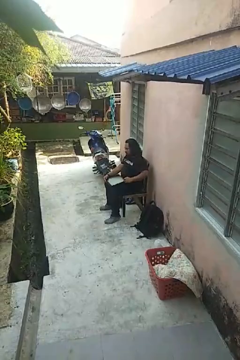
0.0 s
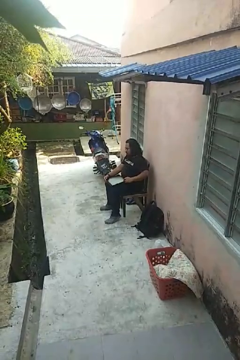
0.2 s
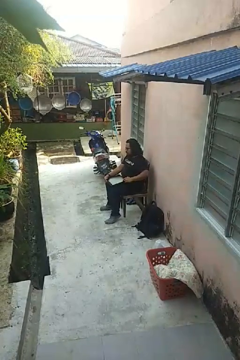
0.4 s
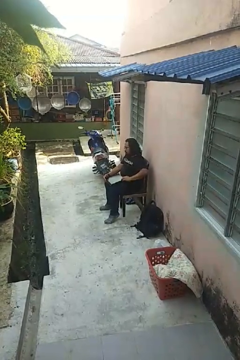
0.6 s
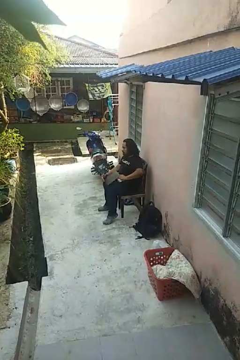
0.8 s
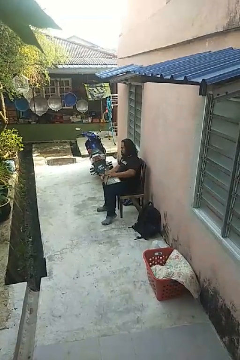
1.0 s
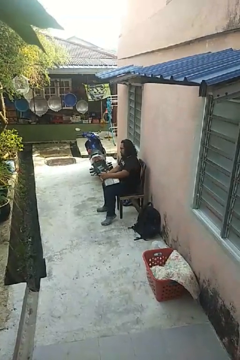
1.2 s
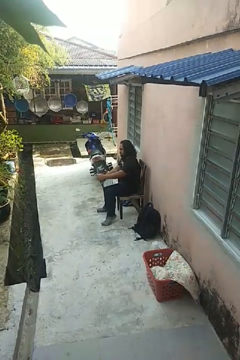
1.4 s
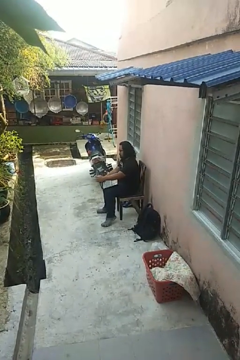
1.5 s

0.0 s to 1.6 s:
person opens laptop

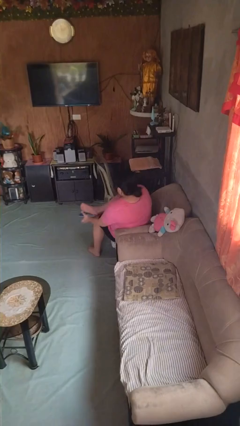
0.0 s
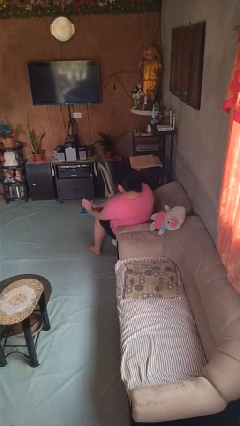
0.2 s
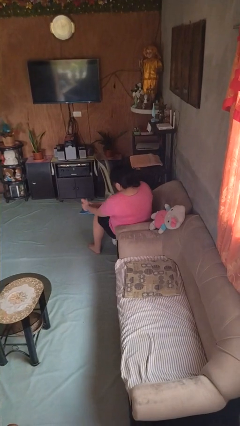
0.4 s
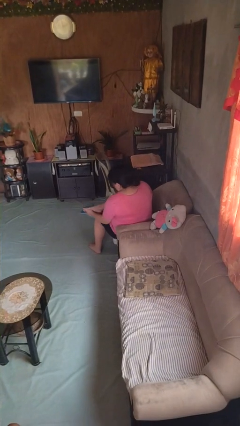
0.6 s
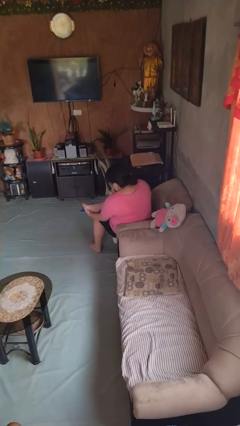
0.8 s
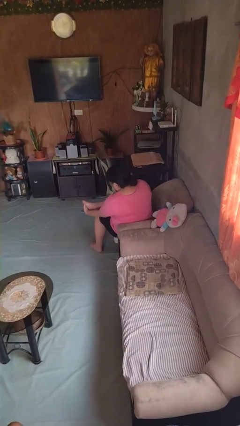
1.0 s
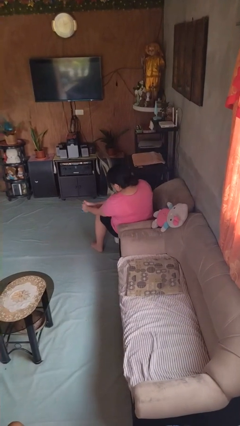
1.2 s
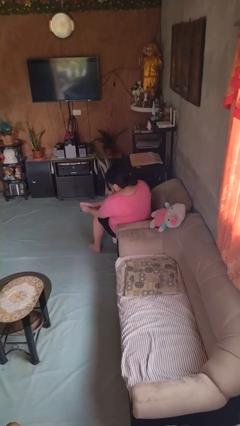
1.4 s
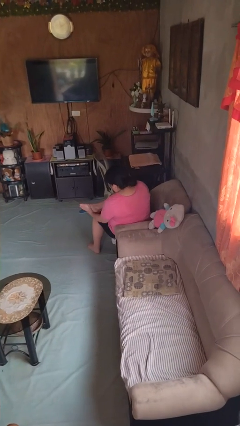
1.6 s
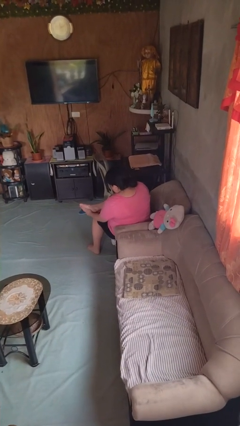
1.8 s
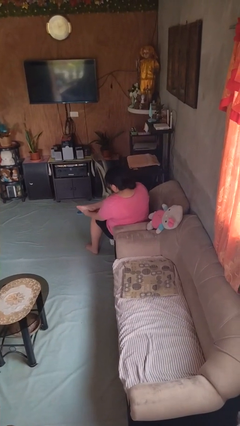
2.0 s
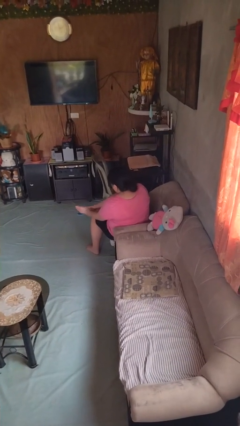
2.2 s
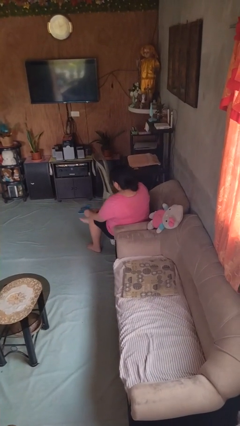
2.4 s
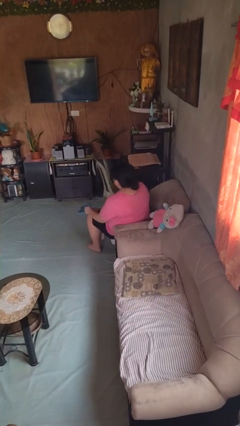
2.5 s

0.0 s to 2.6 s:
person rubs foot

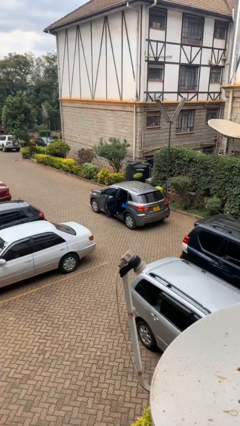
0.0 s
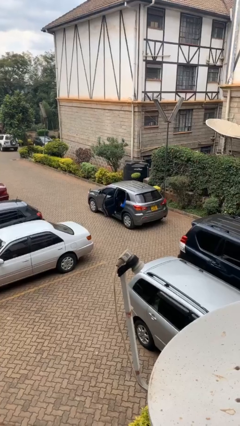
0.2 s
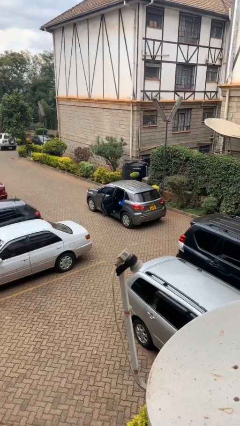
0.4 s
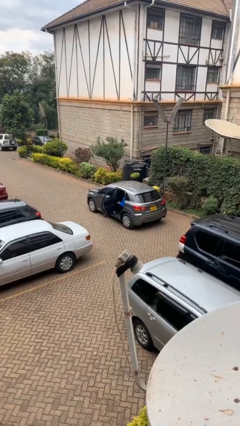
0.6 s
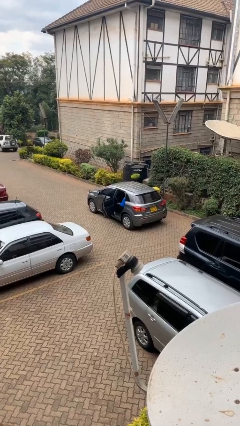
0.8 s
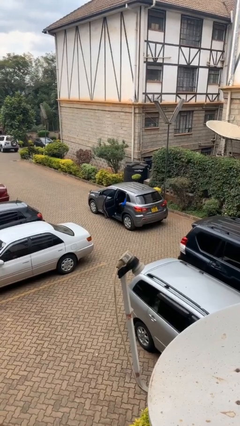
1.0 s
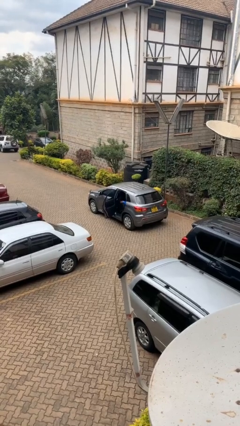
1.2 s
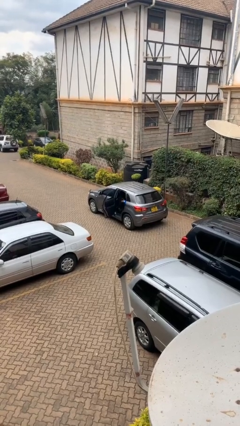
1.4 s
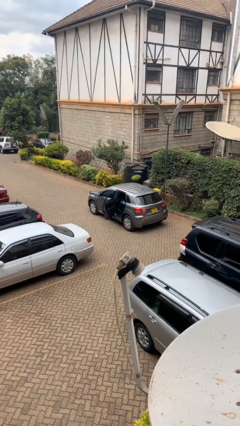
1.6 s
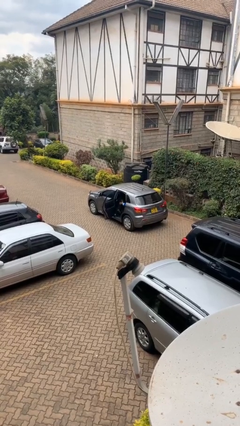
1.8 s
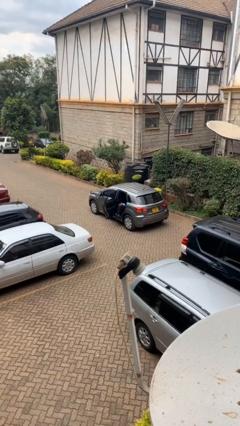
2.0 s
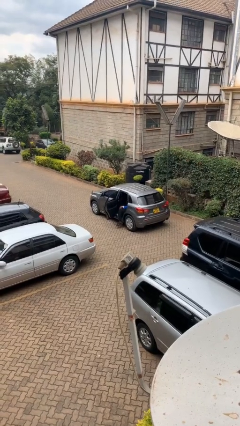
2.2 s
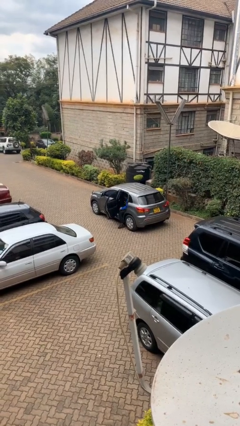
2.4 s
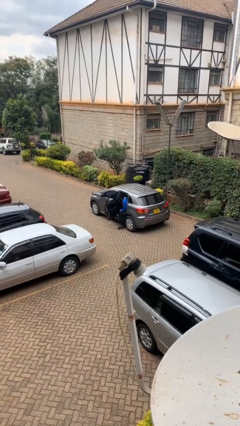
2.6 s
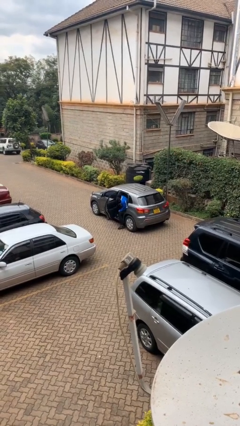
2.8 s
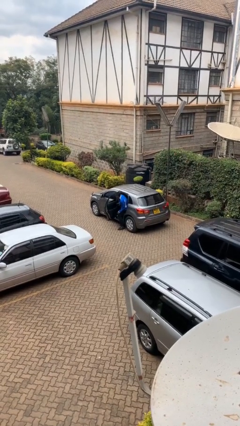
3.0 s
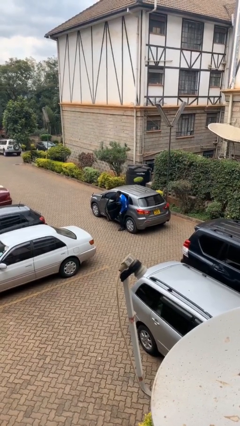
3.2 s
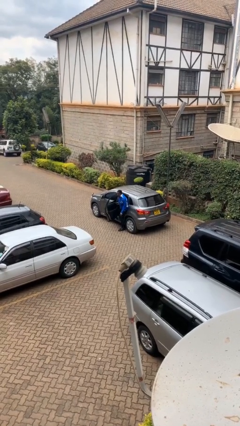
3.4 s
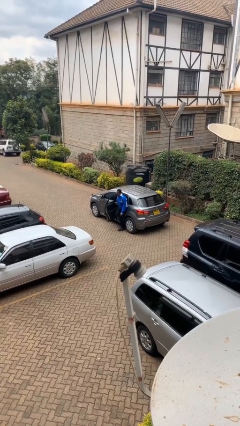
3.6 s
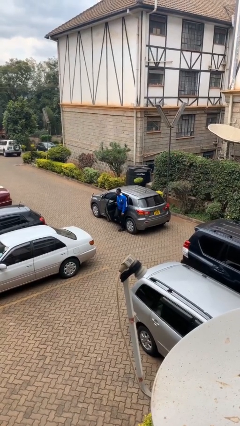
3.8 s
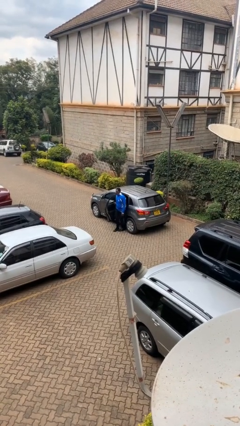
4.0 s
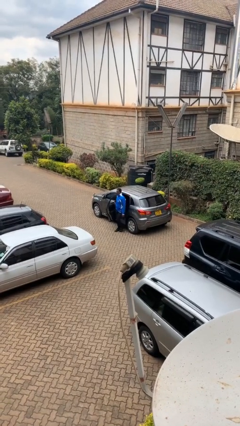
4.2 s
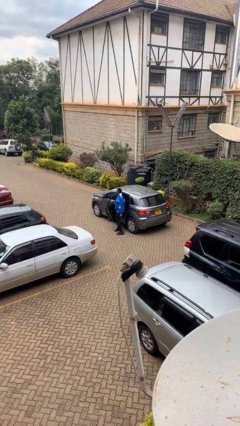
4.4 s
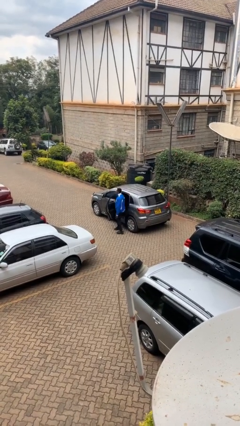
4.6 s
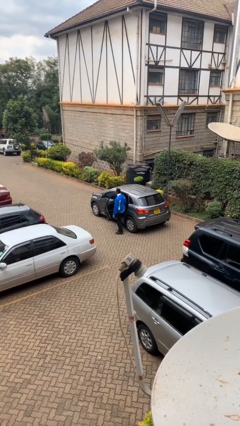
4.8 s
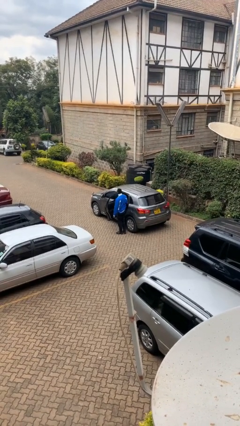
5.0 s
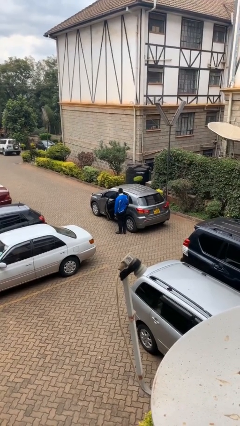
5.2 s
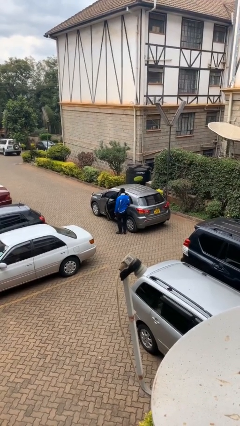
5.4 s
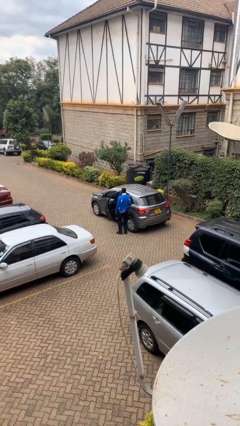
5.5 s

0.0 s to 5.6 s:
person exits car

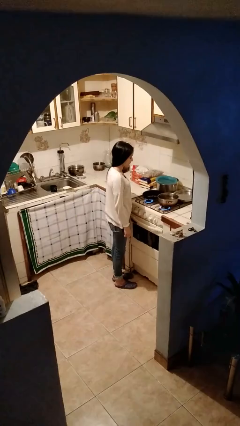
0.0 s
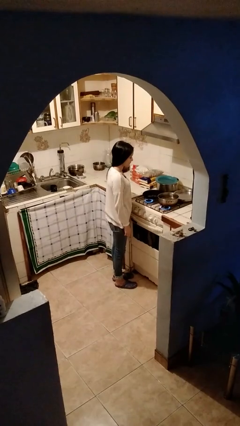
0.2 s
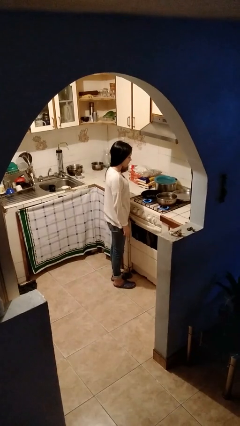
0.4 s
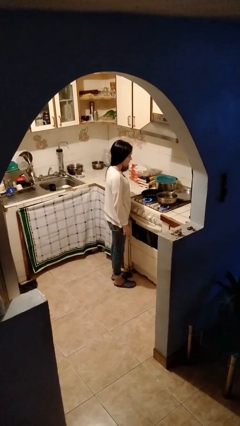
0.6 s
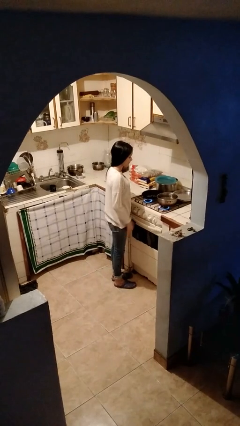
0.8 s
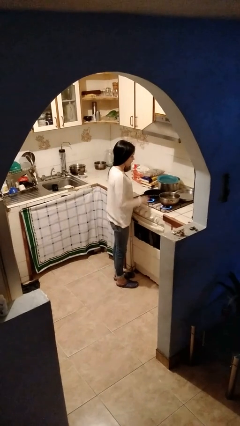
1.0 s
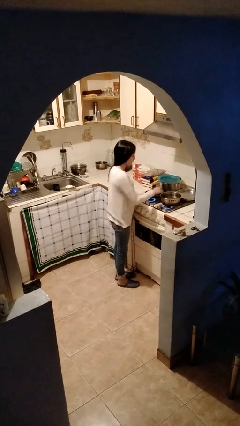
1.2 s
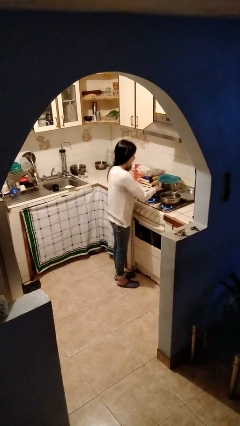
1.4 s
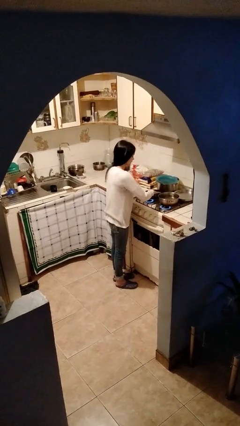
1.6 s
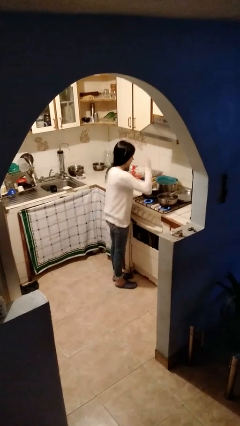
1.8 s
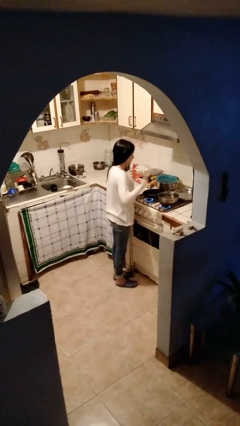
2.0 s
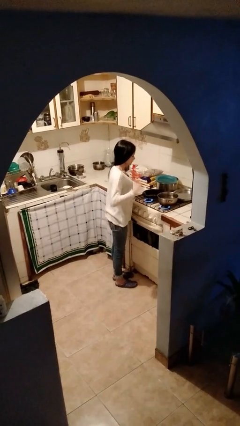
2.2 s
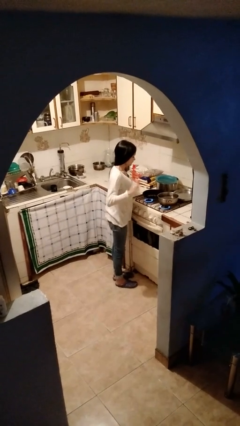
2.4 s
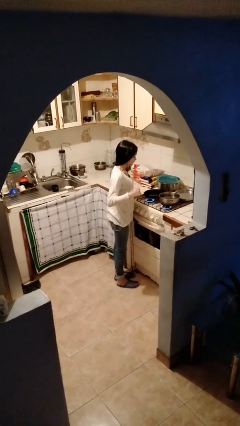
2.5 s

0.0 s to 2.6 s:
person burns hand

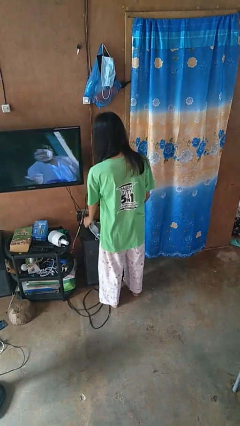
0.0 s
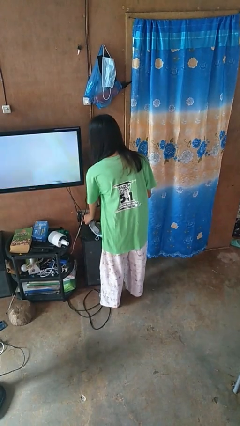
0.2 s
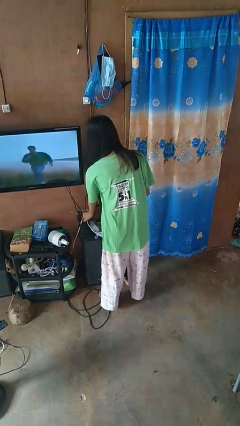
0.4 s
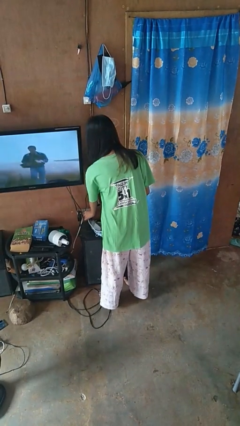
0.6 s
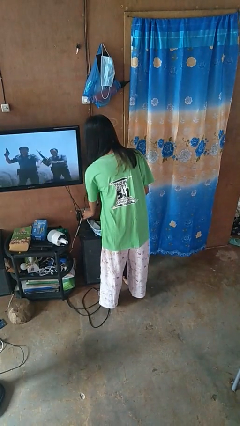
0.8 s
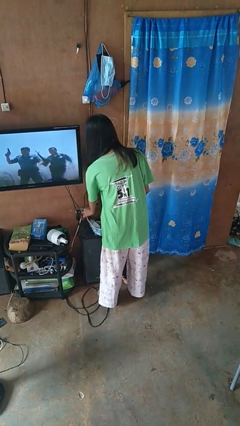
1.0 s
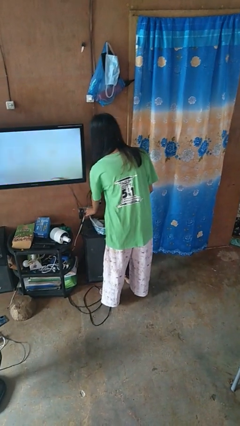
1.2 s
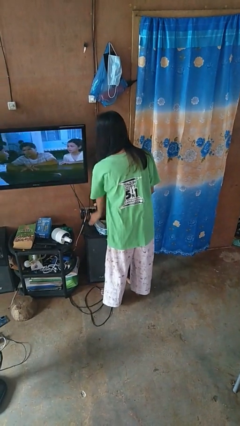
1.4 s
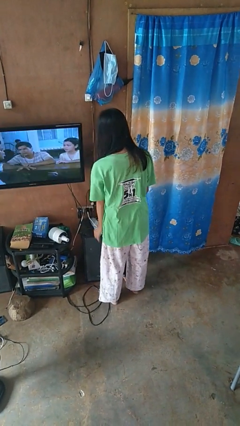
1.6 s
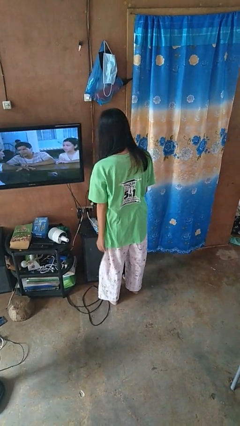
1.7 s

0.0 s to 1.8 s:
person plugs into electrical socket

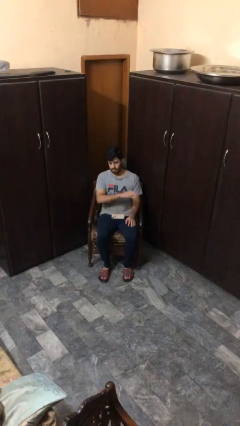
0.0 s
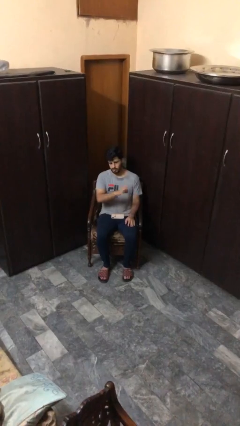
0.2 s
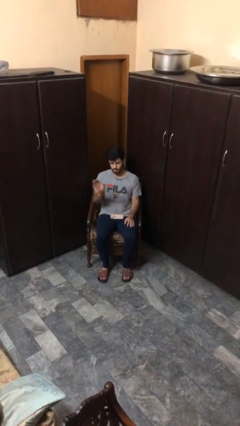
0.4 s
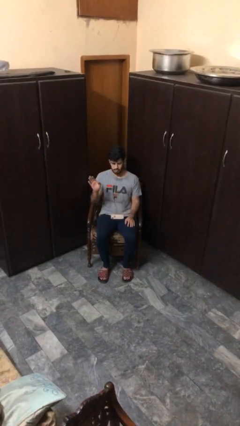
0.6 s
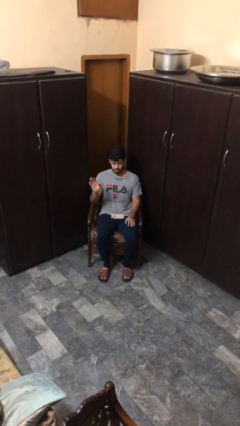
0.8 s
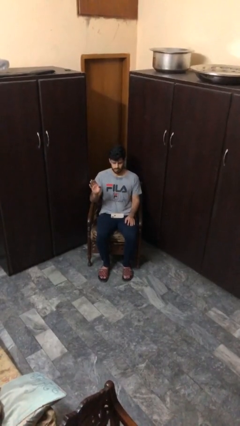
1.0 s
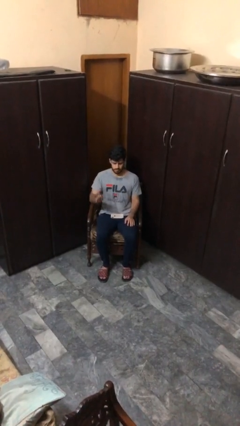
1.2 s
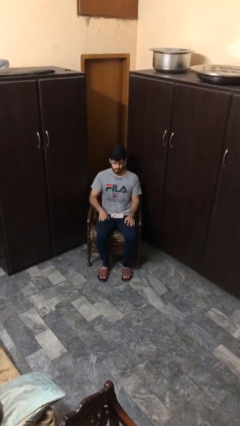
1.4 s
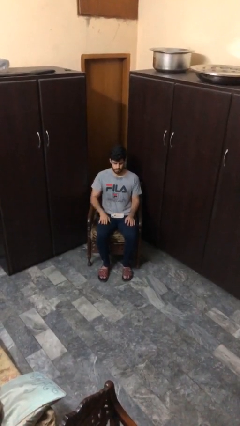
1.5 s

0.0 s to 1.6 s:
person gestures swipe right

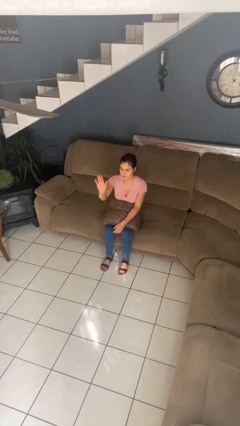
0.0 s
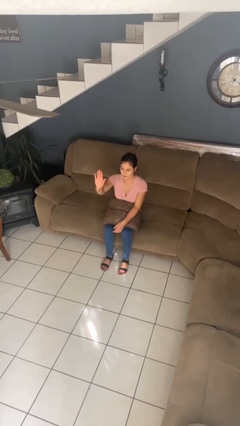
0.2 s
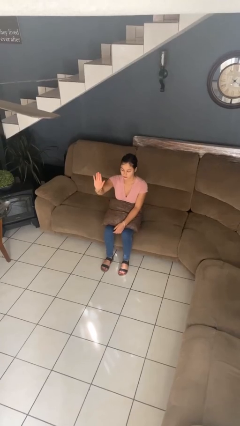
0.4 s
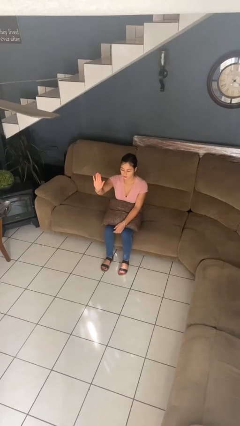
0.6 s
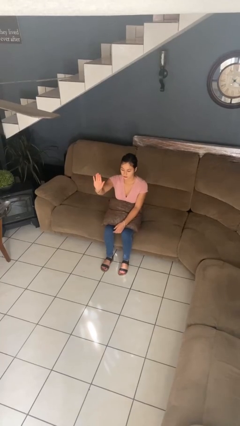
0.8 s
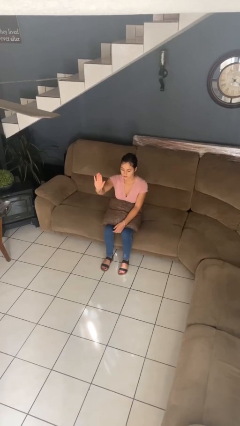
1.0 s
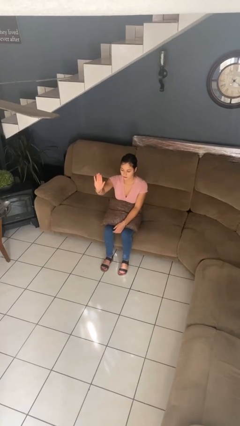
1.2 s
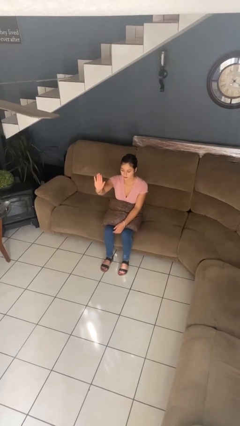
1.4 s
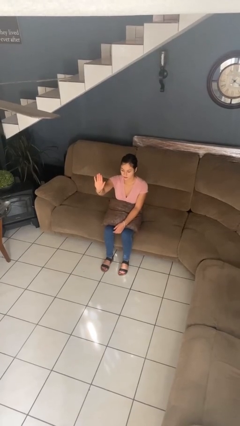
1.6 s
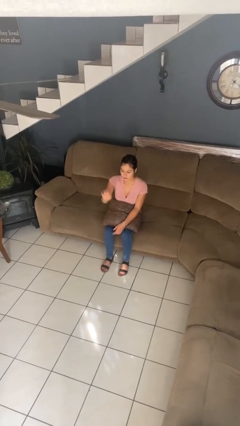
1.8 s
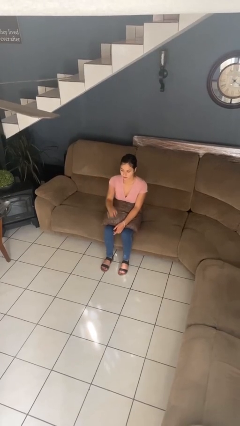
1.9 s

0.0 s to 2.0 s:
person gestures stop
